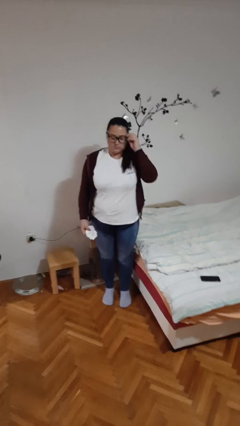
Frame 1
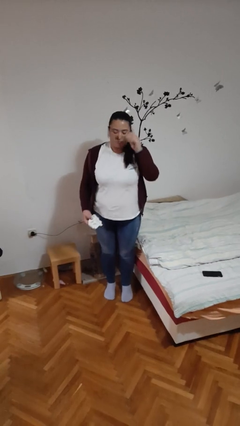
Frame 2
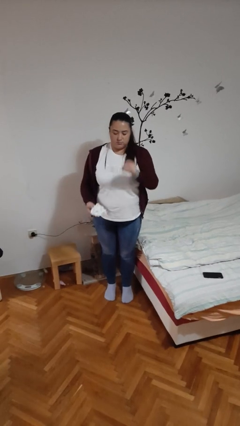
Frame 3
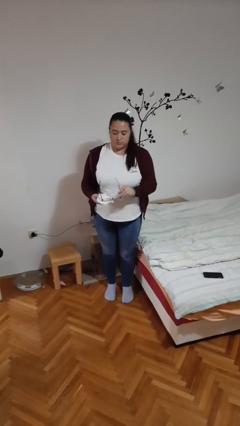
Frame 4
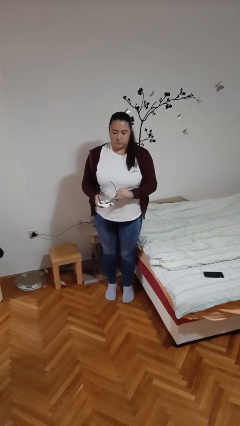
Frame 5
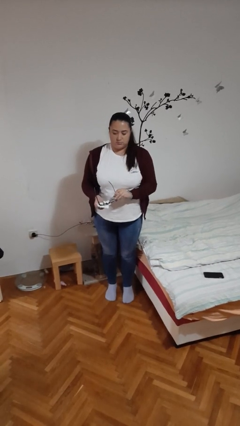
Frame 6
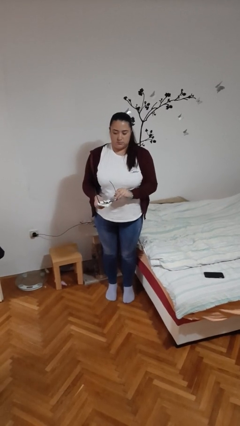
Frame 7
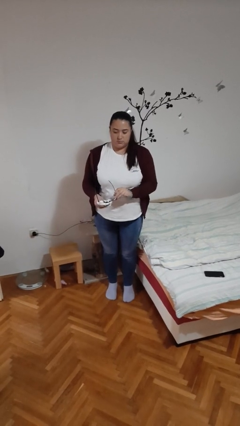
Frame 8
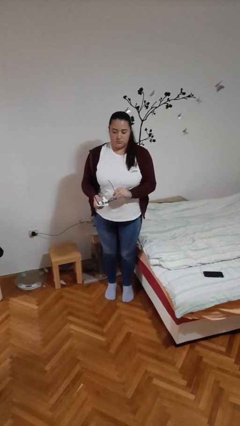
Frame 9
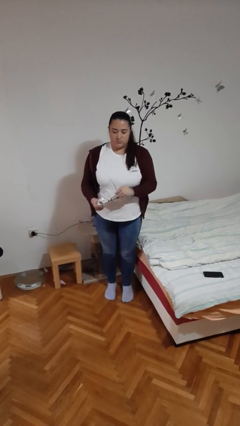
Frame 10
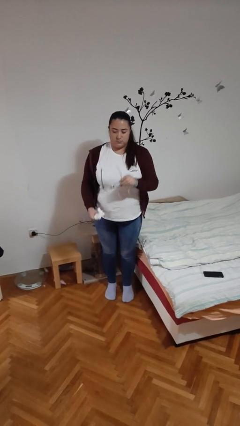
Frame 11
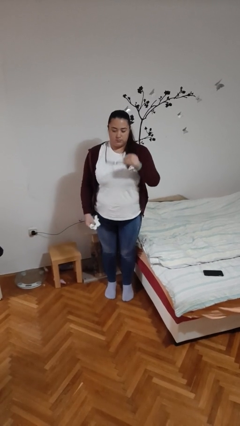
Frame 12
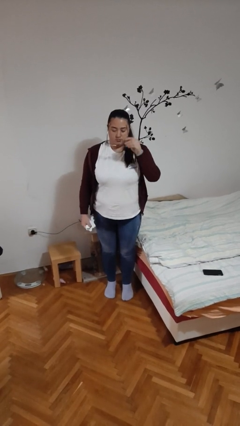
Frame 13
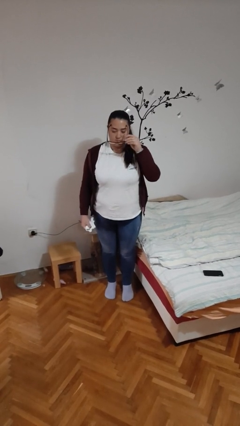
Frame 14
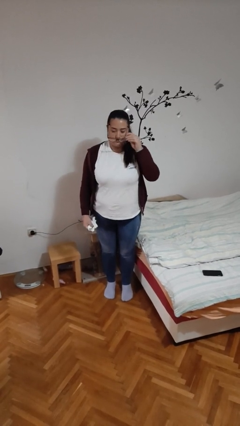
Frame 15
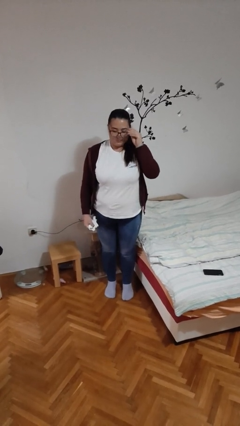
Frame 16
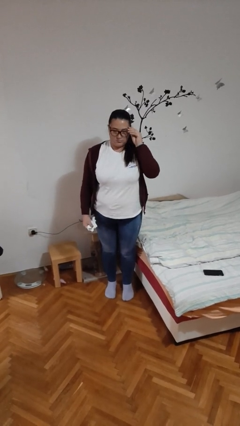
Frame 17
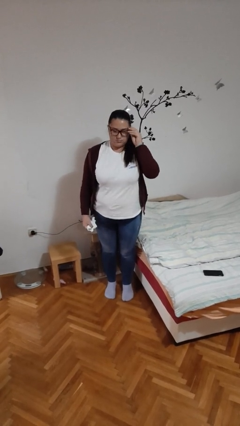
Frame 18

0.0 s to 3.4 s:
person cleans eyeglasses

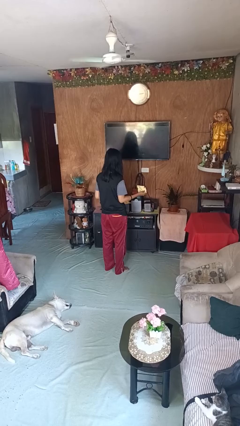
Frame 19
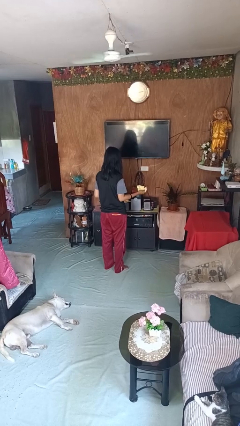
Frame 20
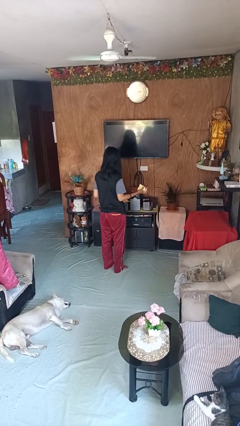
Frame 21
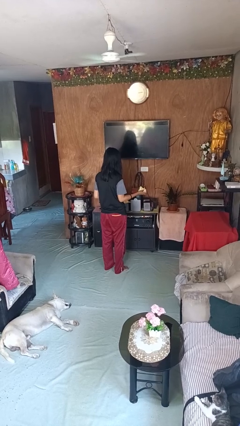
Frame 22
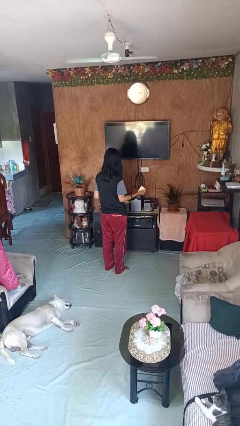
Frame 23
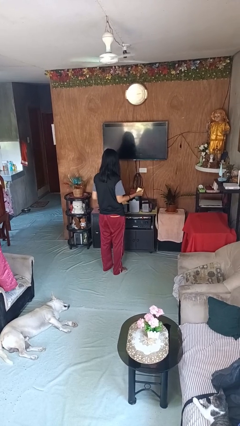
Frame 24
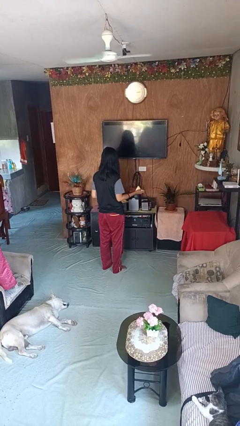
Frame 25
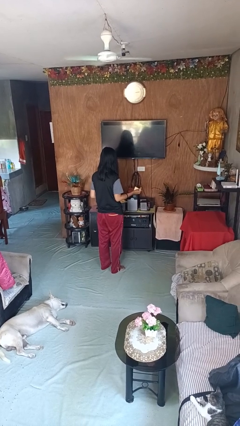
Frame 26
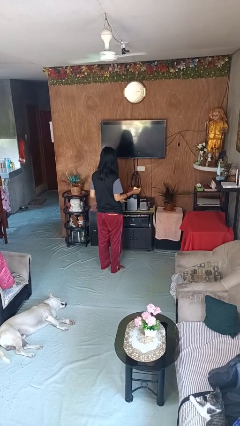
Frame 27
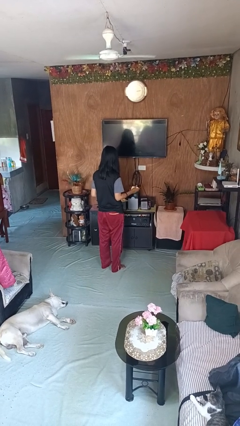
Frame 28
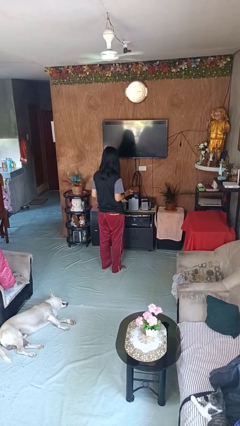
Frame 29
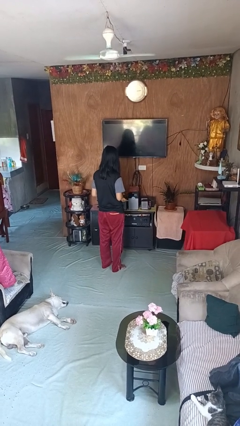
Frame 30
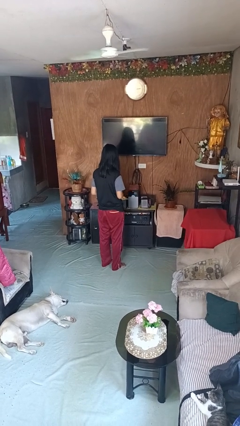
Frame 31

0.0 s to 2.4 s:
person crumples paper

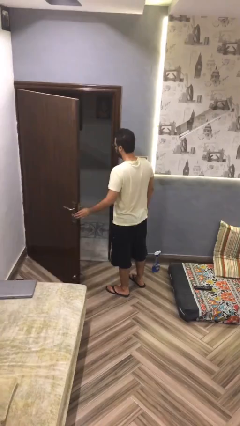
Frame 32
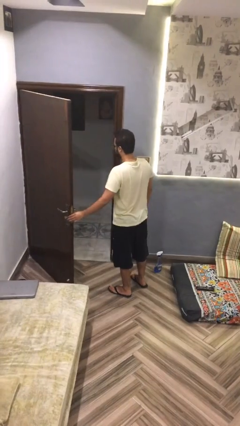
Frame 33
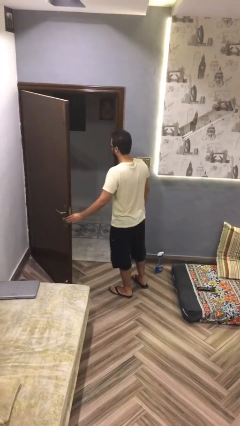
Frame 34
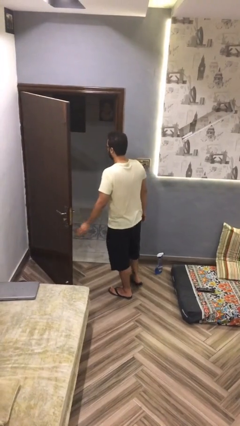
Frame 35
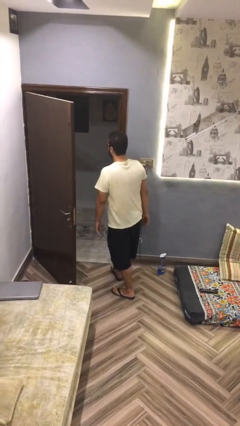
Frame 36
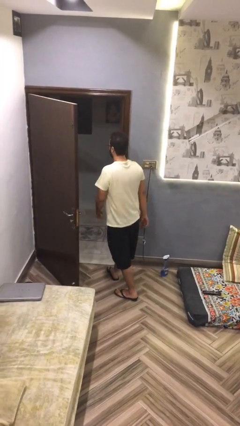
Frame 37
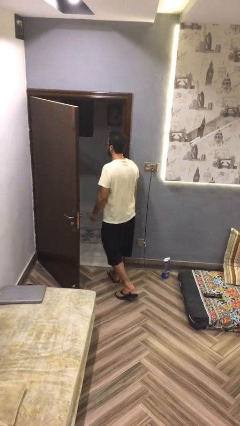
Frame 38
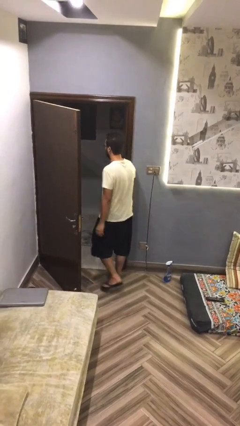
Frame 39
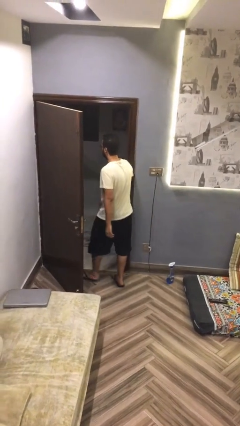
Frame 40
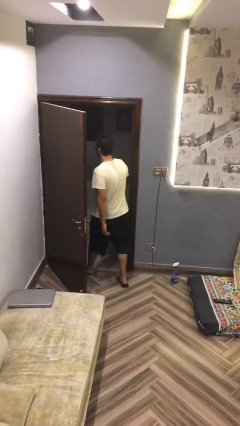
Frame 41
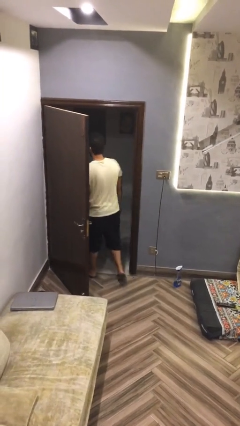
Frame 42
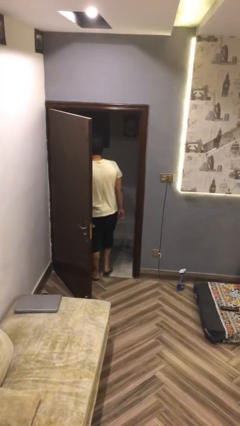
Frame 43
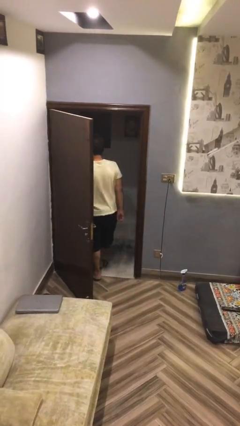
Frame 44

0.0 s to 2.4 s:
person exits scene through structure

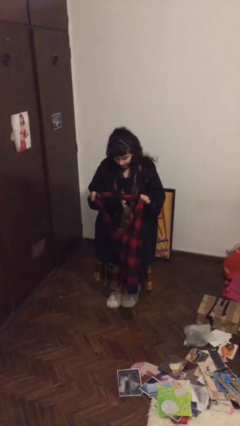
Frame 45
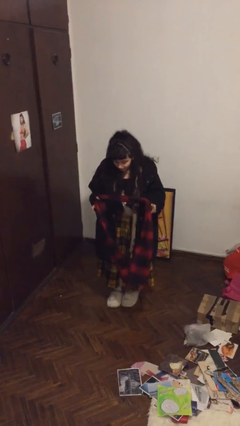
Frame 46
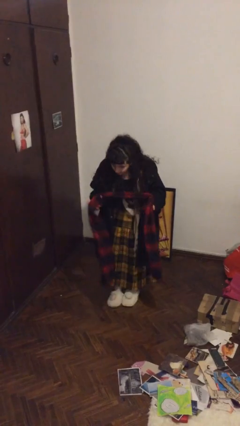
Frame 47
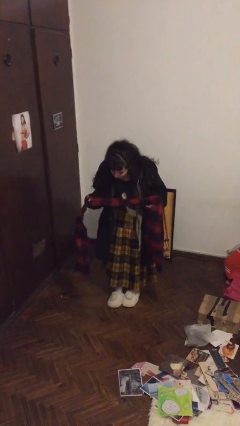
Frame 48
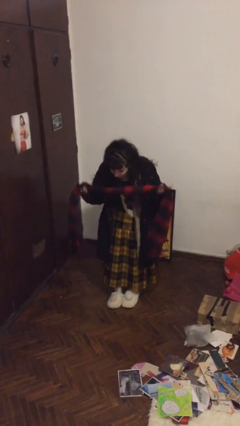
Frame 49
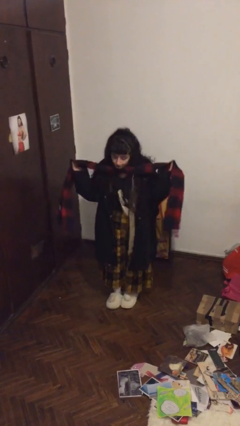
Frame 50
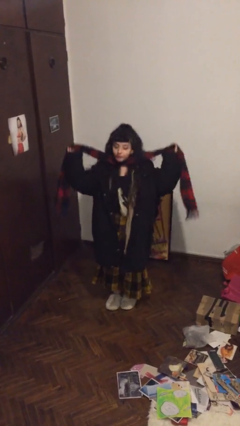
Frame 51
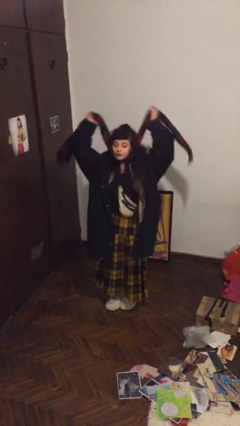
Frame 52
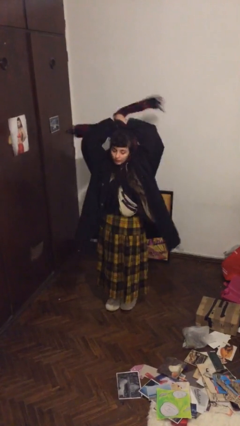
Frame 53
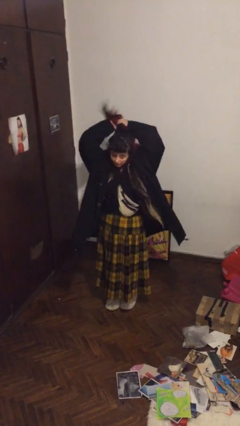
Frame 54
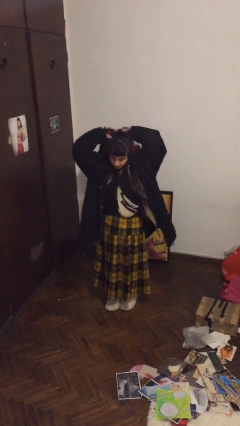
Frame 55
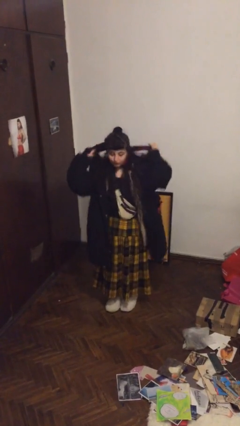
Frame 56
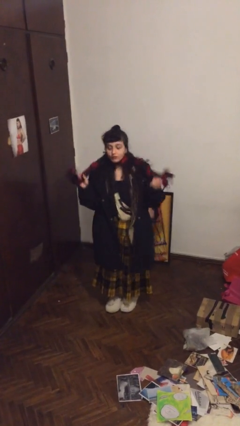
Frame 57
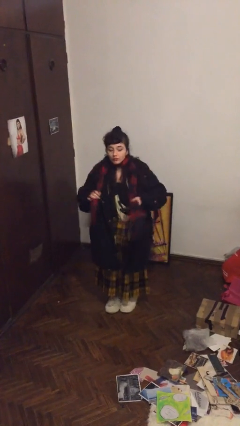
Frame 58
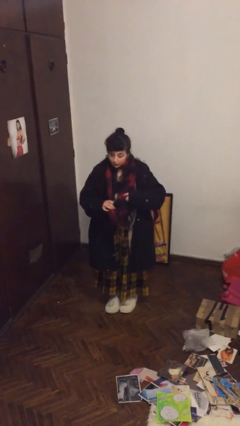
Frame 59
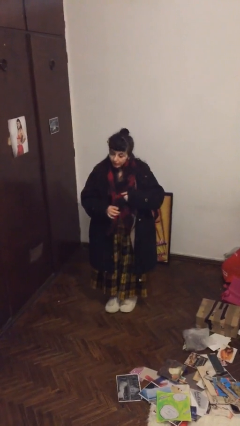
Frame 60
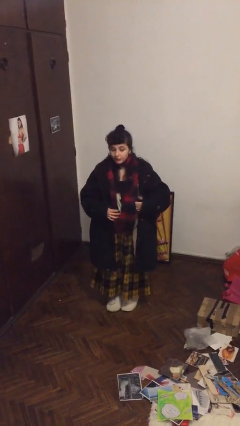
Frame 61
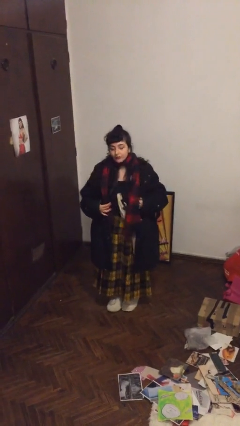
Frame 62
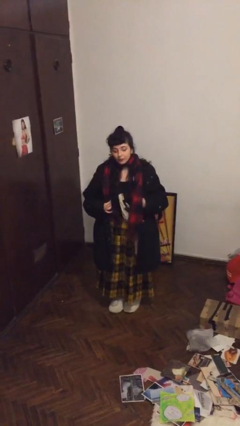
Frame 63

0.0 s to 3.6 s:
person puts on scarf

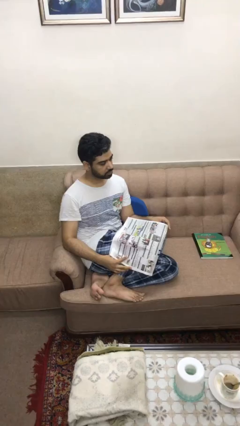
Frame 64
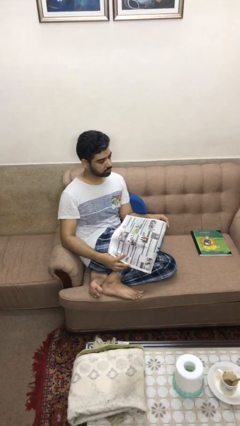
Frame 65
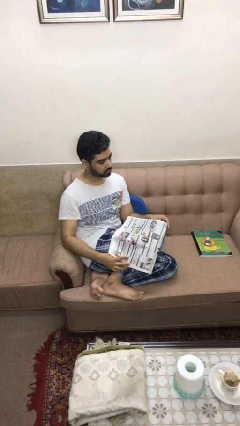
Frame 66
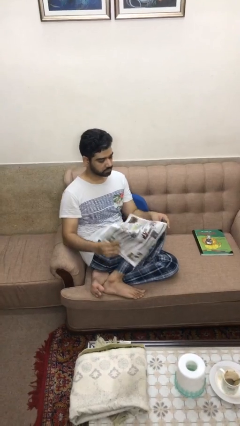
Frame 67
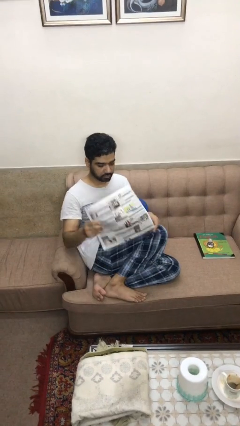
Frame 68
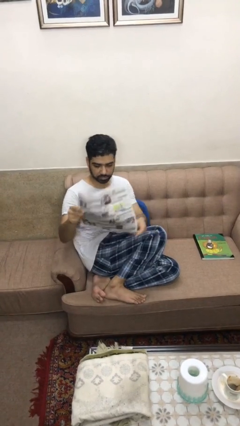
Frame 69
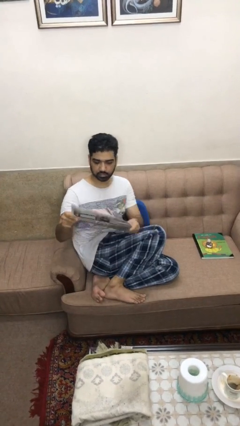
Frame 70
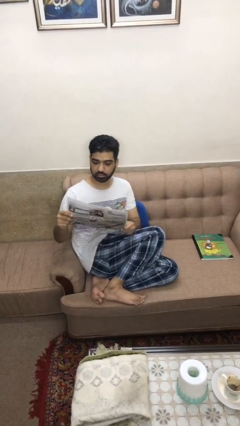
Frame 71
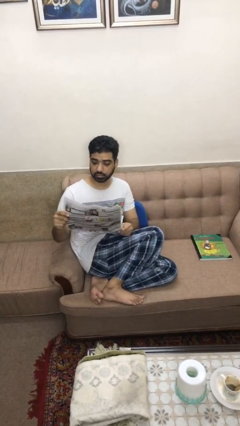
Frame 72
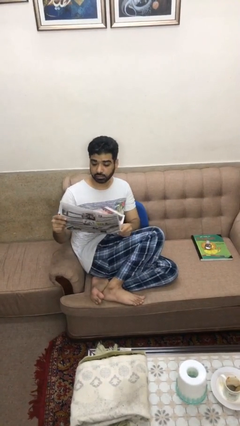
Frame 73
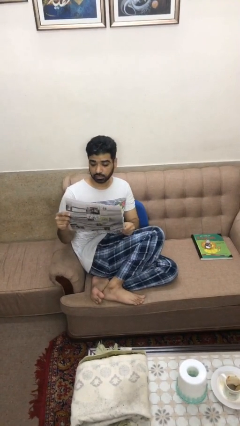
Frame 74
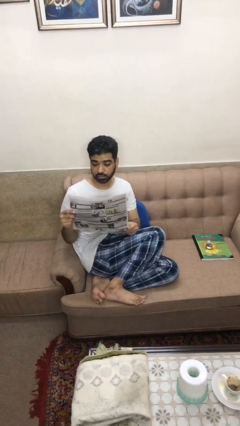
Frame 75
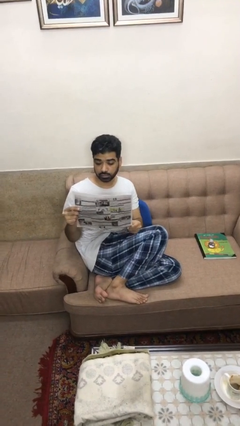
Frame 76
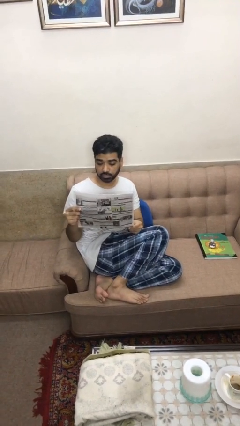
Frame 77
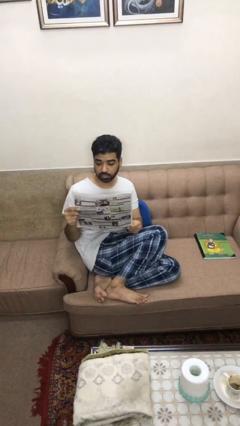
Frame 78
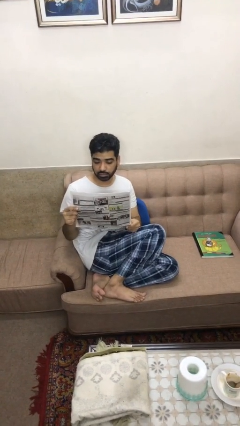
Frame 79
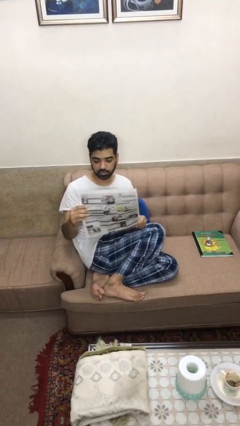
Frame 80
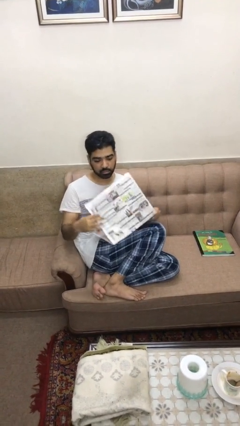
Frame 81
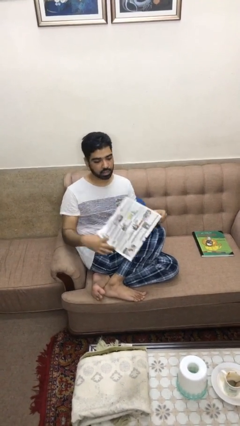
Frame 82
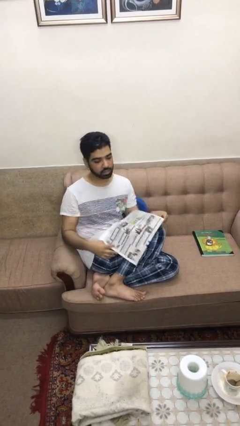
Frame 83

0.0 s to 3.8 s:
person reads newspaper

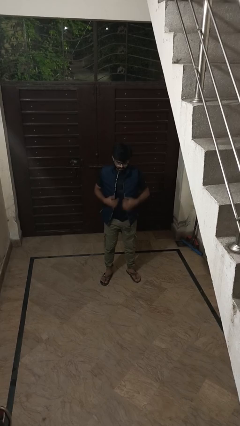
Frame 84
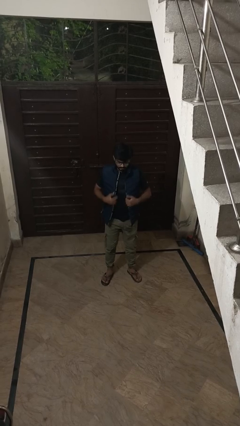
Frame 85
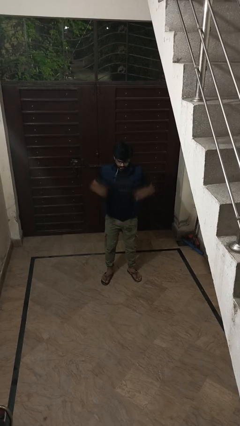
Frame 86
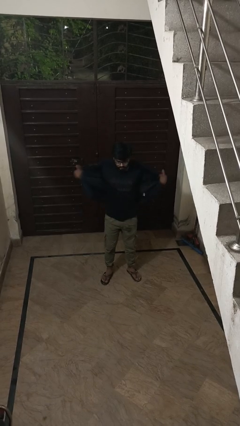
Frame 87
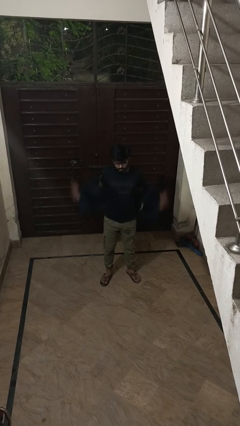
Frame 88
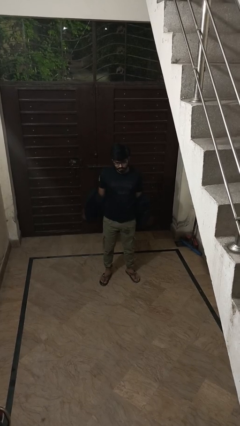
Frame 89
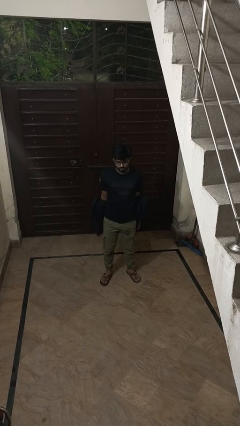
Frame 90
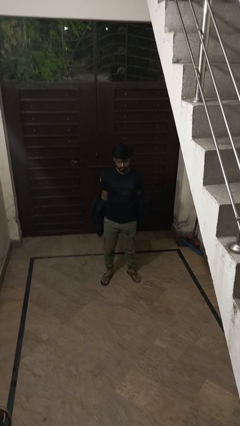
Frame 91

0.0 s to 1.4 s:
person takes off jacket

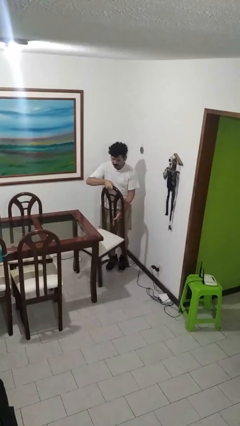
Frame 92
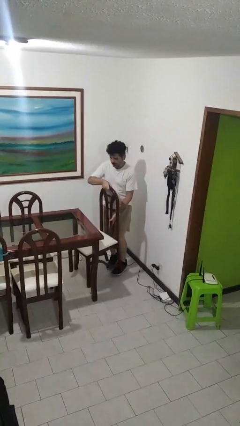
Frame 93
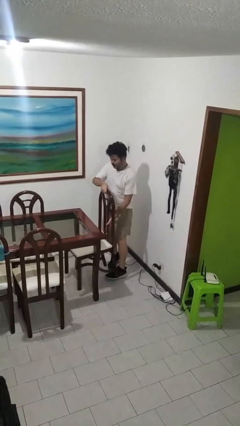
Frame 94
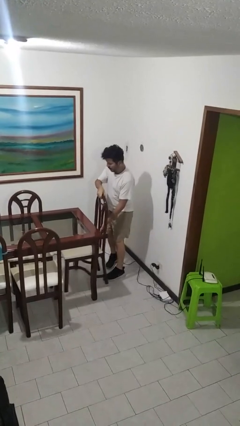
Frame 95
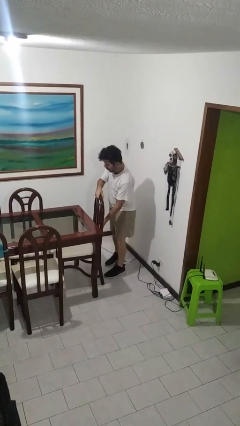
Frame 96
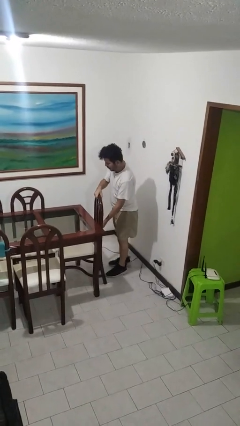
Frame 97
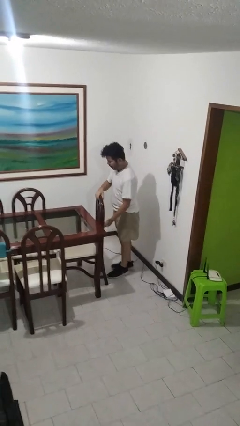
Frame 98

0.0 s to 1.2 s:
person pushes in chair
